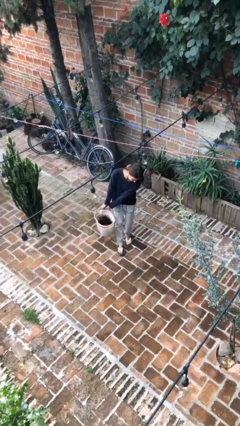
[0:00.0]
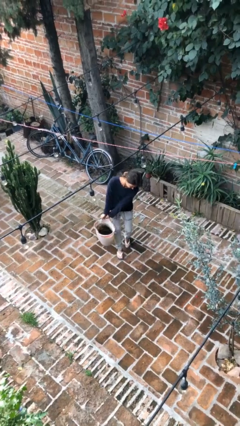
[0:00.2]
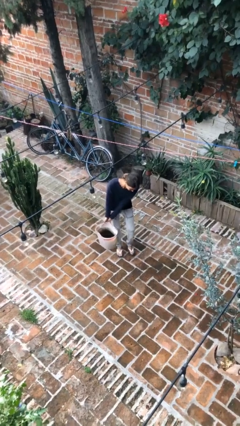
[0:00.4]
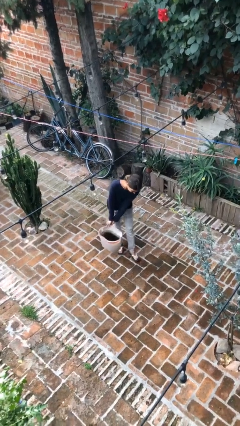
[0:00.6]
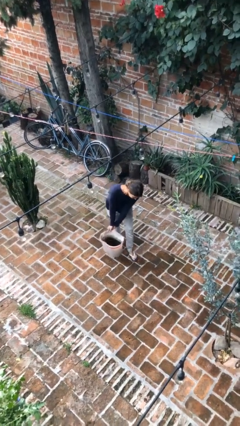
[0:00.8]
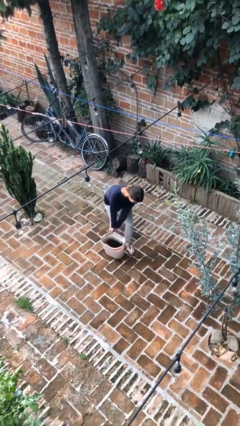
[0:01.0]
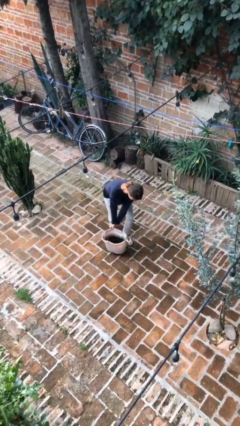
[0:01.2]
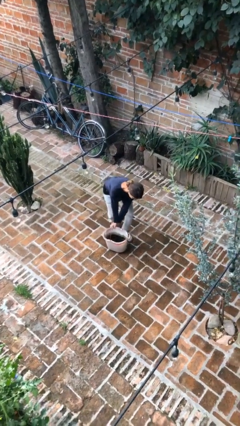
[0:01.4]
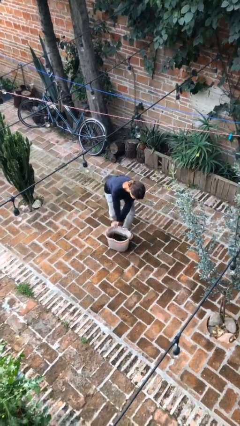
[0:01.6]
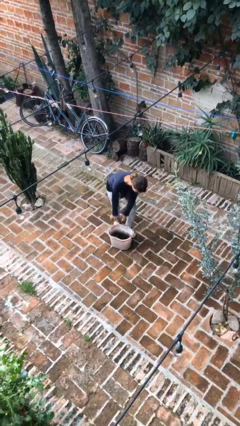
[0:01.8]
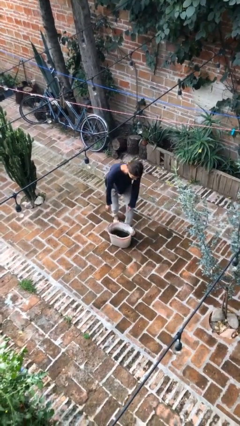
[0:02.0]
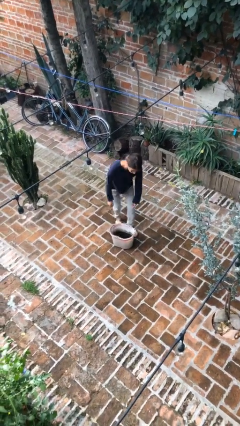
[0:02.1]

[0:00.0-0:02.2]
person puts down object on floor

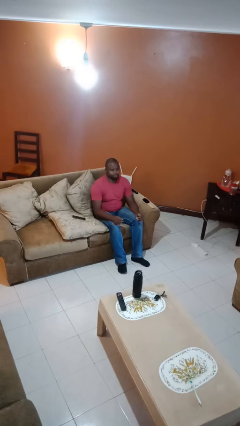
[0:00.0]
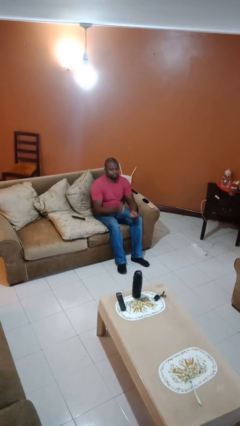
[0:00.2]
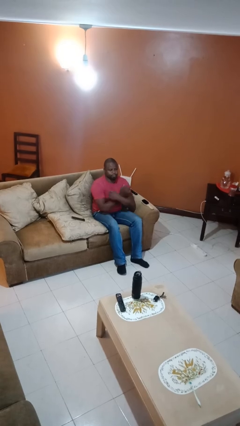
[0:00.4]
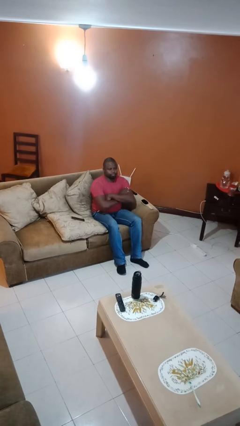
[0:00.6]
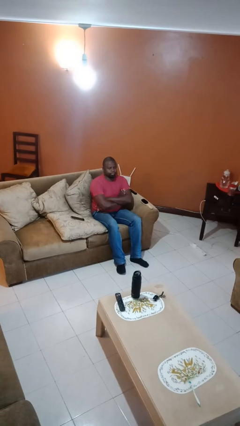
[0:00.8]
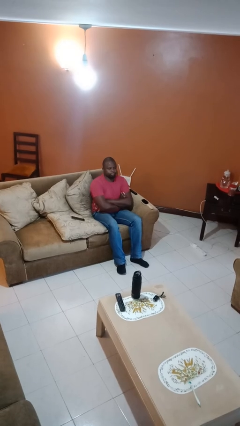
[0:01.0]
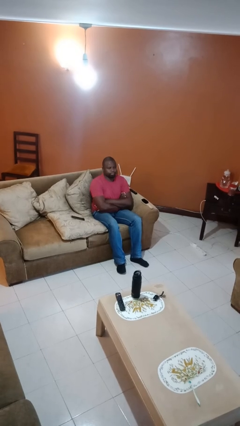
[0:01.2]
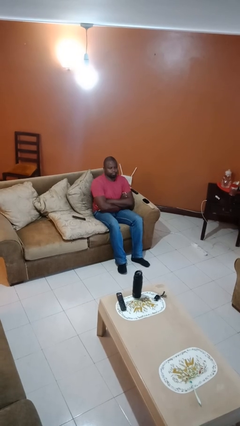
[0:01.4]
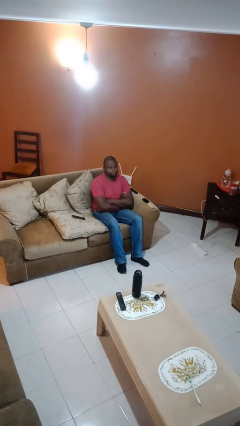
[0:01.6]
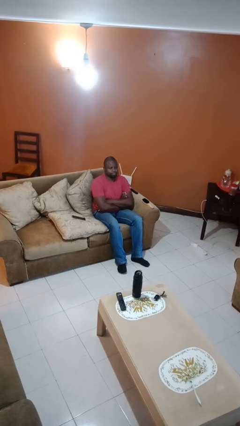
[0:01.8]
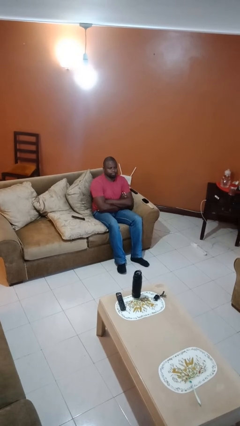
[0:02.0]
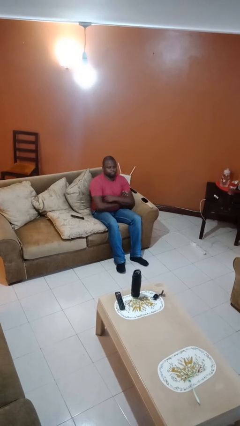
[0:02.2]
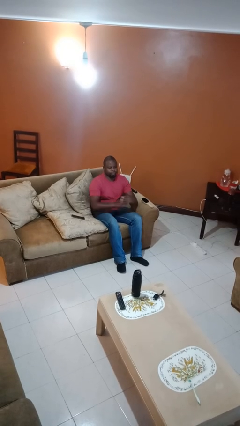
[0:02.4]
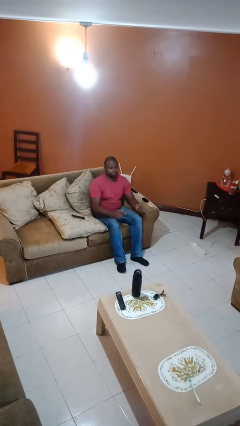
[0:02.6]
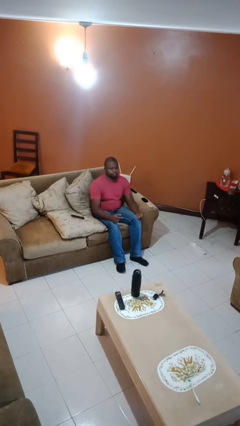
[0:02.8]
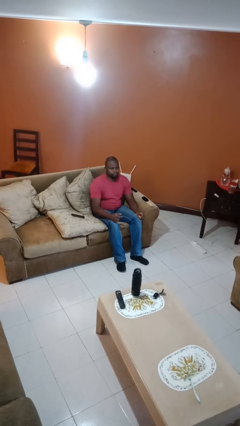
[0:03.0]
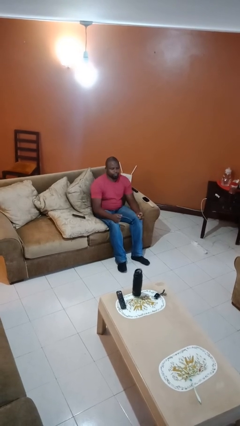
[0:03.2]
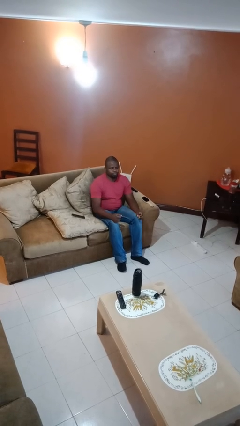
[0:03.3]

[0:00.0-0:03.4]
person crosses arms

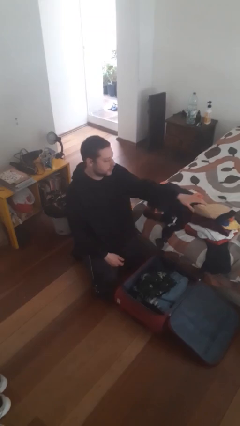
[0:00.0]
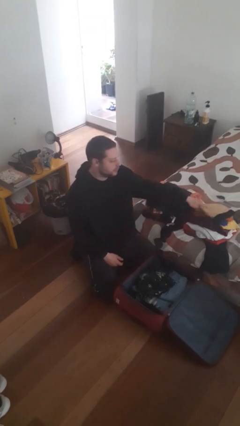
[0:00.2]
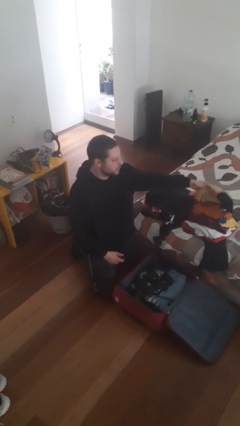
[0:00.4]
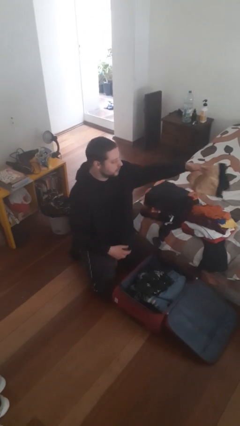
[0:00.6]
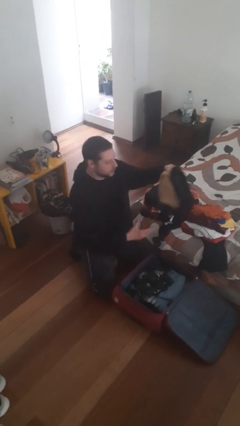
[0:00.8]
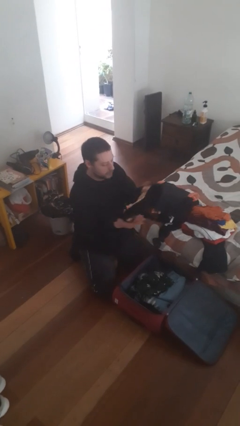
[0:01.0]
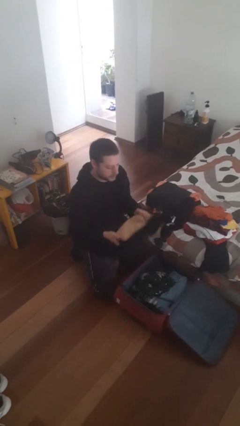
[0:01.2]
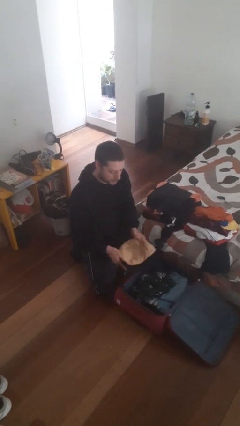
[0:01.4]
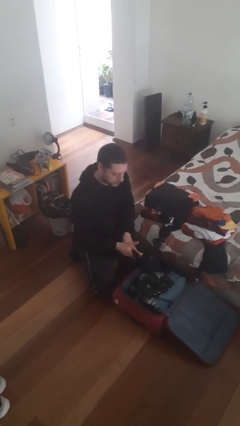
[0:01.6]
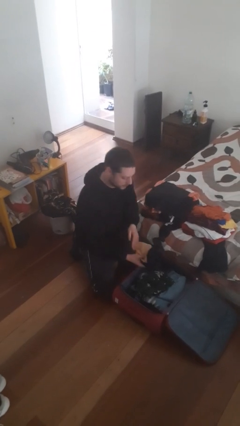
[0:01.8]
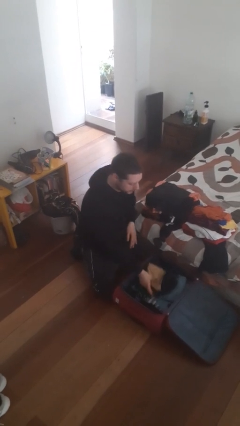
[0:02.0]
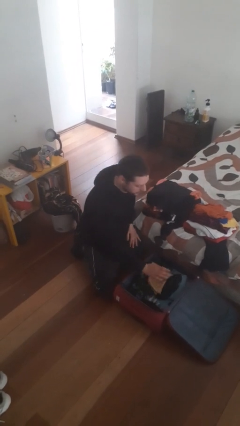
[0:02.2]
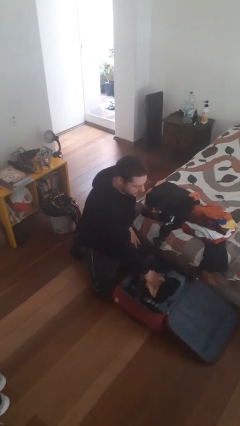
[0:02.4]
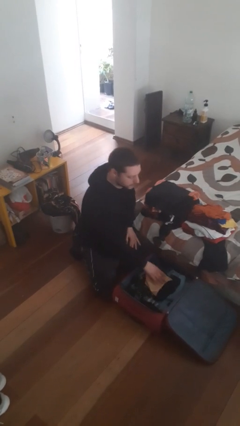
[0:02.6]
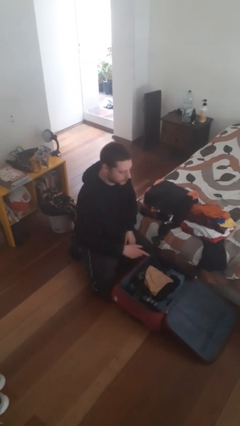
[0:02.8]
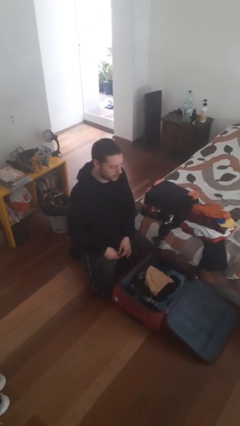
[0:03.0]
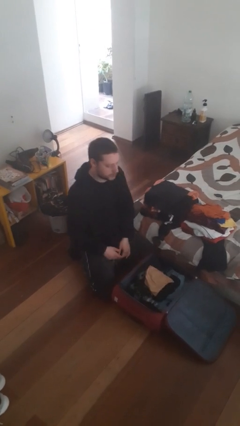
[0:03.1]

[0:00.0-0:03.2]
person loads clothes into suitcase

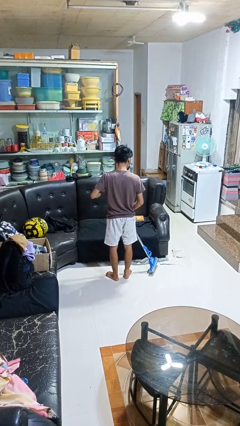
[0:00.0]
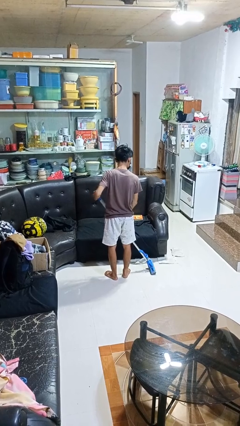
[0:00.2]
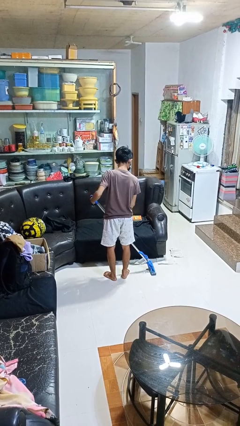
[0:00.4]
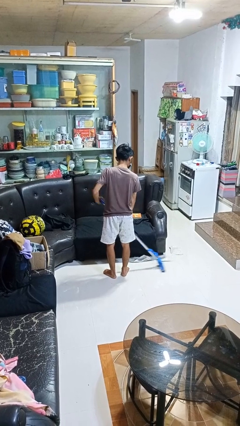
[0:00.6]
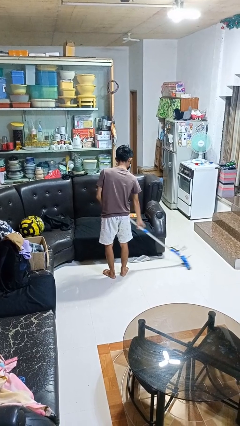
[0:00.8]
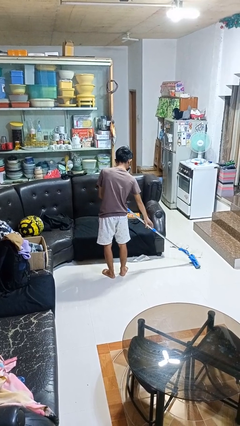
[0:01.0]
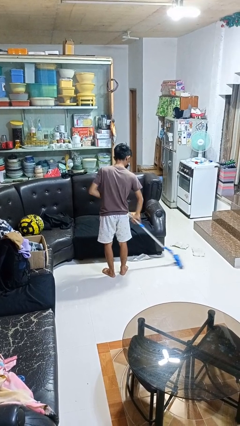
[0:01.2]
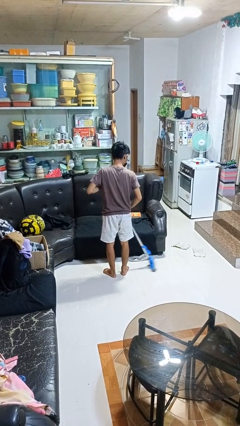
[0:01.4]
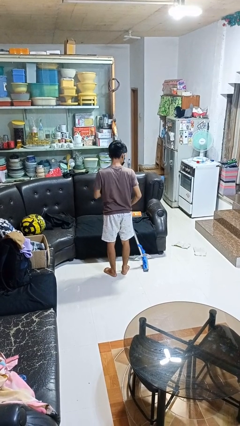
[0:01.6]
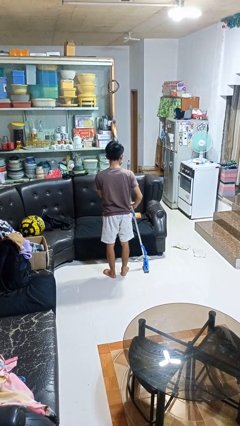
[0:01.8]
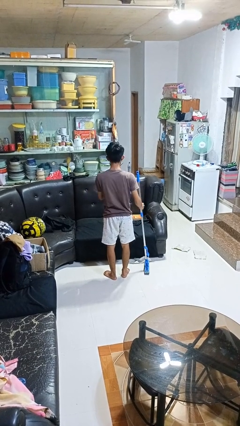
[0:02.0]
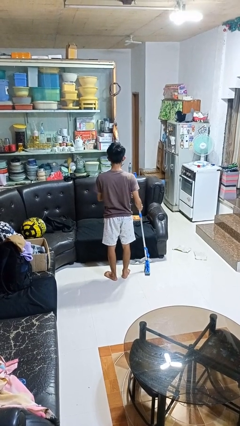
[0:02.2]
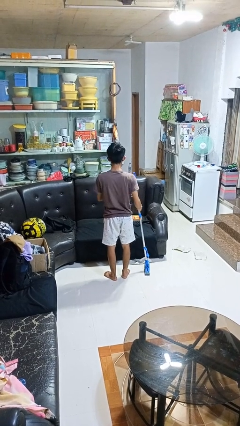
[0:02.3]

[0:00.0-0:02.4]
person mops

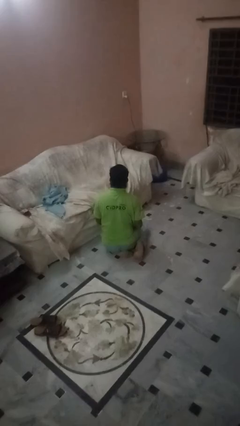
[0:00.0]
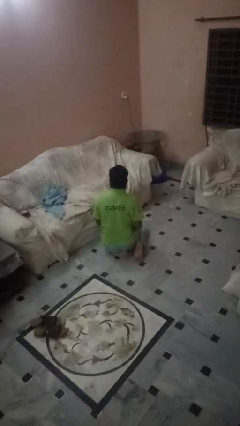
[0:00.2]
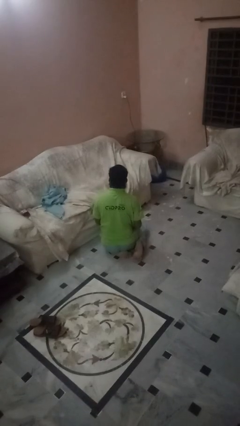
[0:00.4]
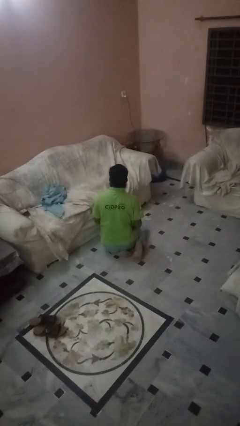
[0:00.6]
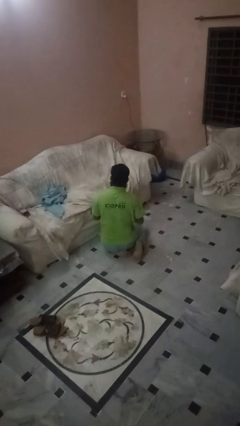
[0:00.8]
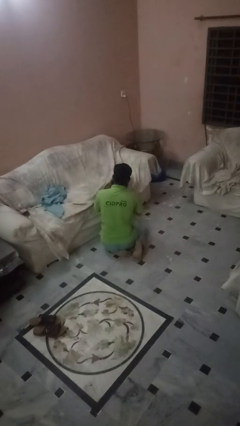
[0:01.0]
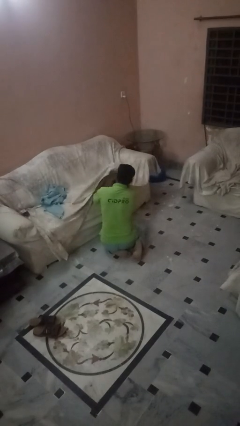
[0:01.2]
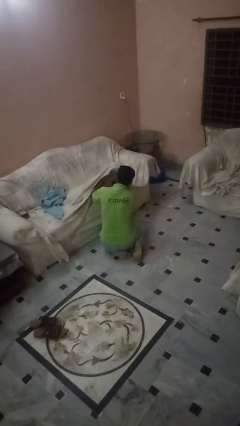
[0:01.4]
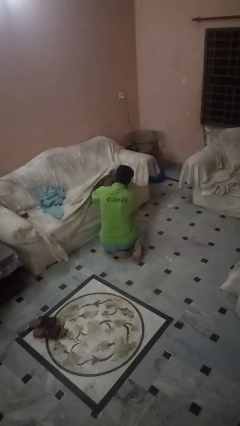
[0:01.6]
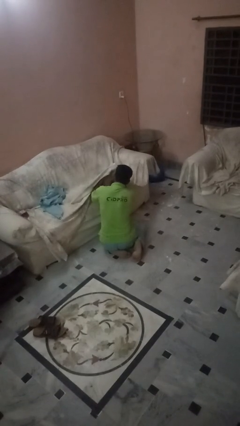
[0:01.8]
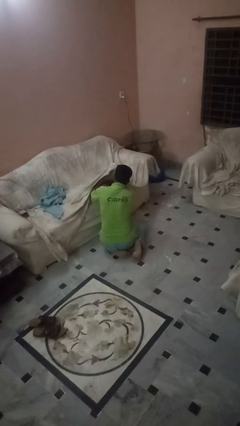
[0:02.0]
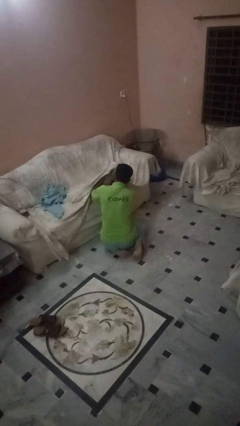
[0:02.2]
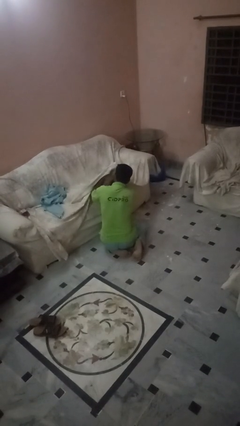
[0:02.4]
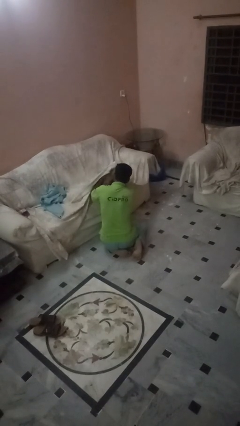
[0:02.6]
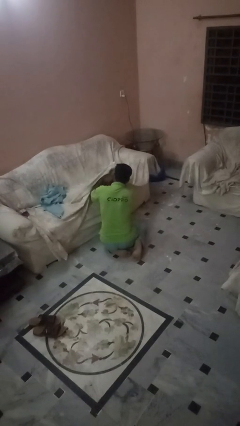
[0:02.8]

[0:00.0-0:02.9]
person searches in couch

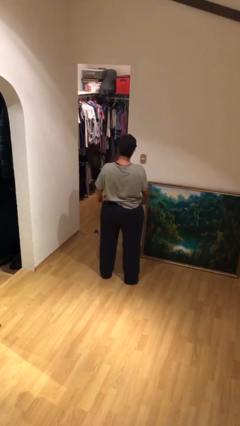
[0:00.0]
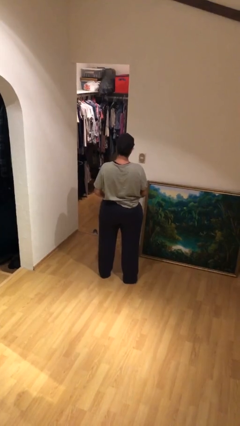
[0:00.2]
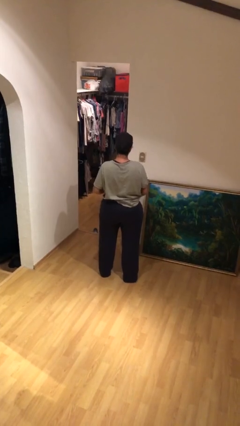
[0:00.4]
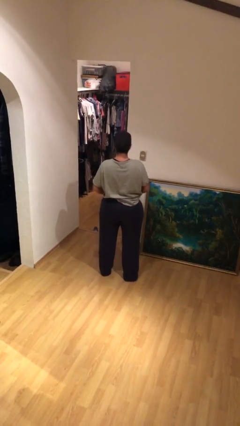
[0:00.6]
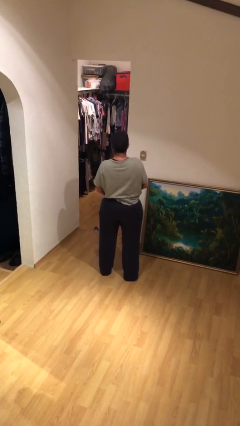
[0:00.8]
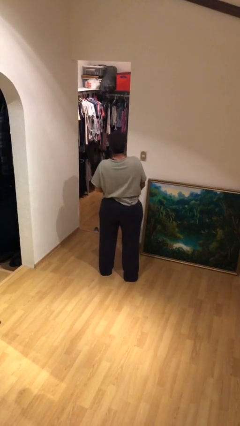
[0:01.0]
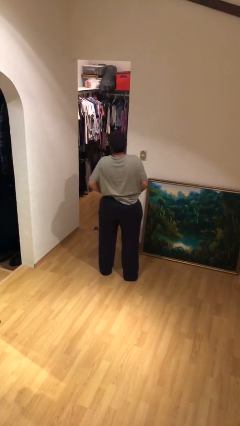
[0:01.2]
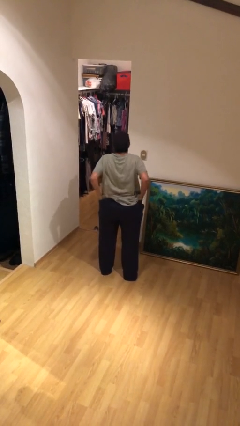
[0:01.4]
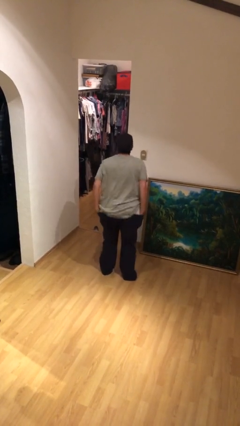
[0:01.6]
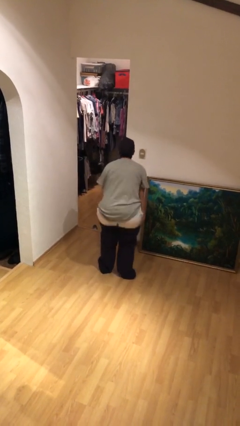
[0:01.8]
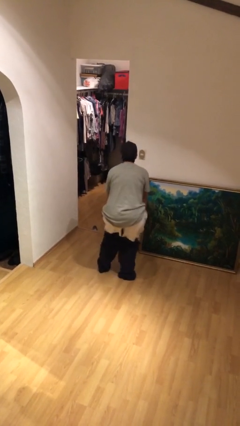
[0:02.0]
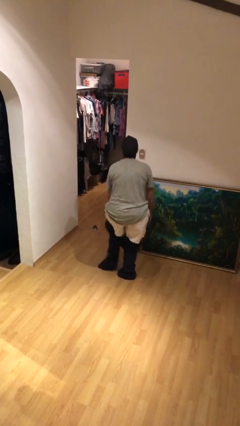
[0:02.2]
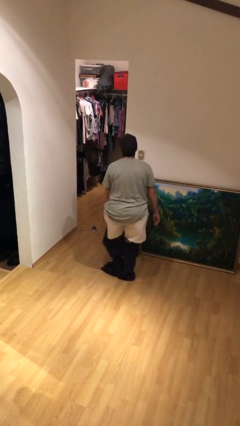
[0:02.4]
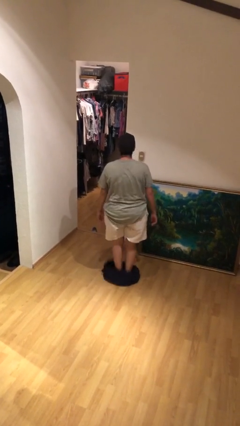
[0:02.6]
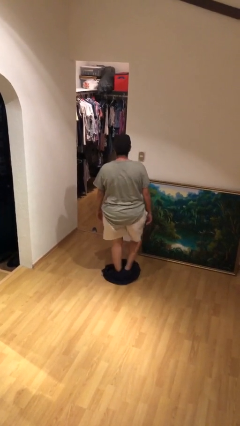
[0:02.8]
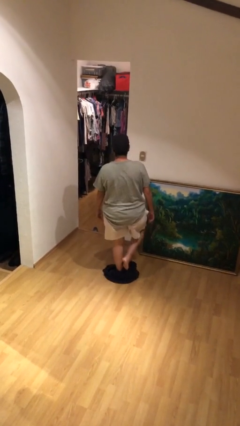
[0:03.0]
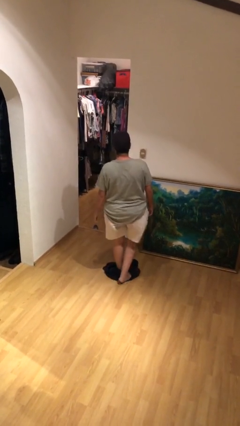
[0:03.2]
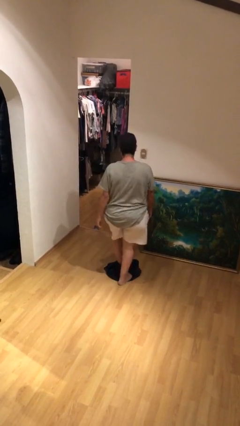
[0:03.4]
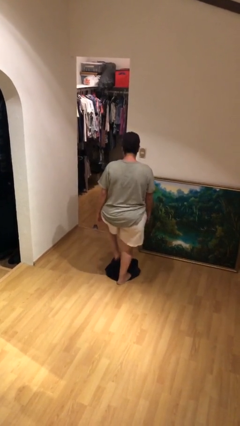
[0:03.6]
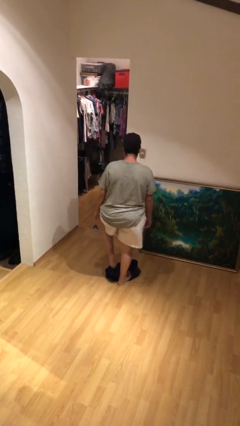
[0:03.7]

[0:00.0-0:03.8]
person takes off pants
